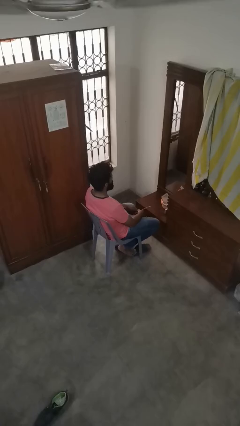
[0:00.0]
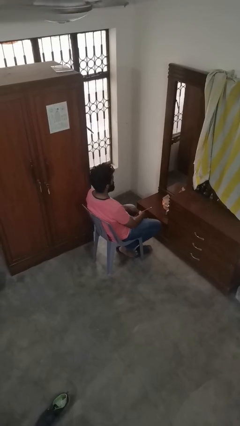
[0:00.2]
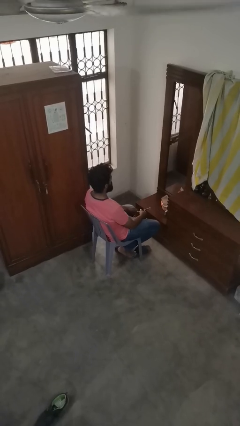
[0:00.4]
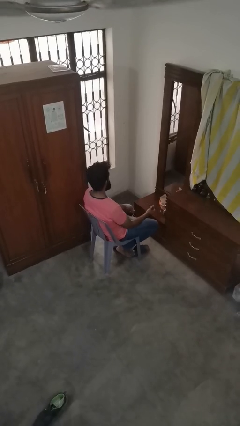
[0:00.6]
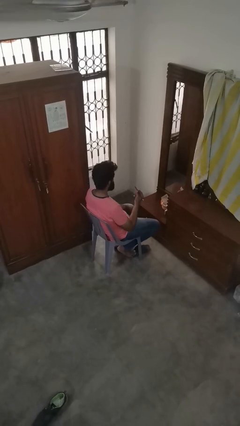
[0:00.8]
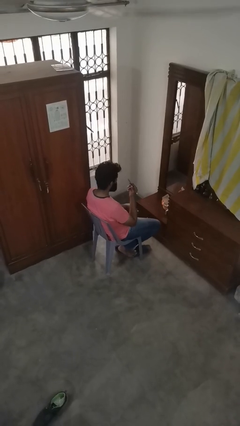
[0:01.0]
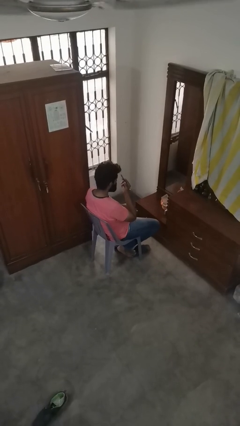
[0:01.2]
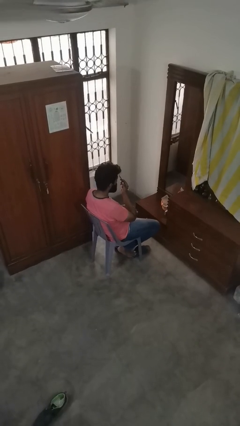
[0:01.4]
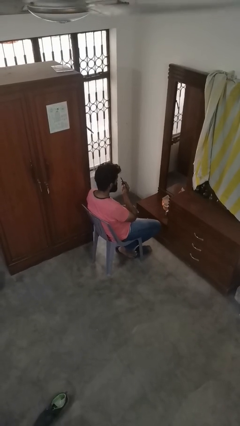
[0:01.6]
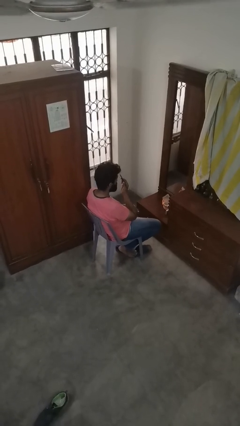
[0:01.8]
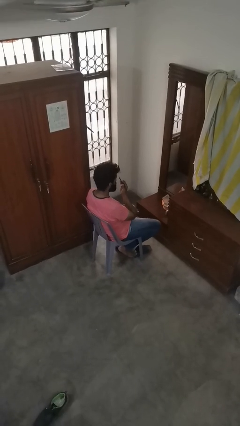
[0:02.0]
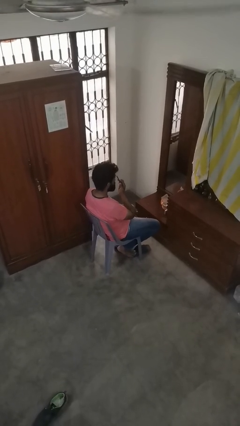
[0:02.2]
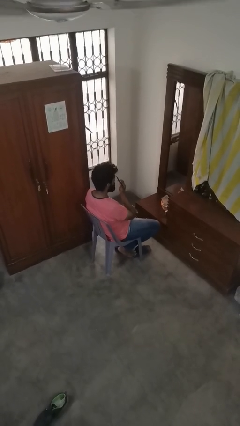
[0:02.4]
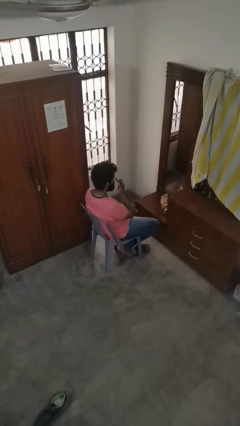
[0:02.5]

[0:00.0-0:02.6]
person applies eye makeup

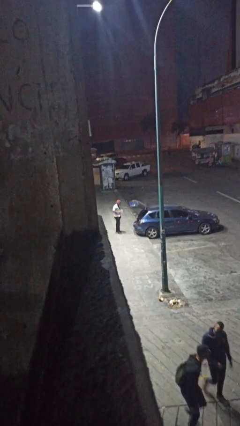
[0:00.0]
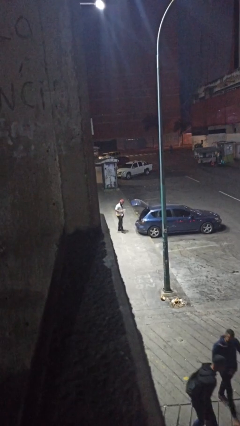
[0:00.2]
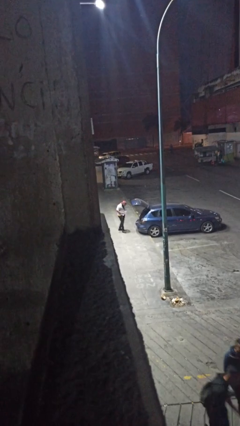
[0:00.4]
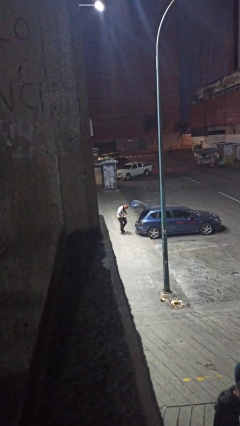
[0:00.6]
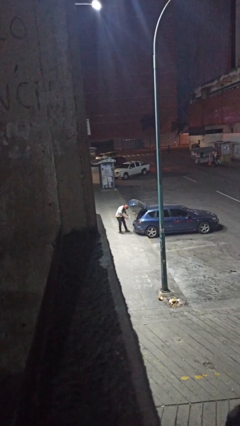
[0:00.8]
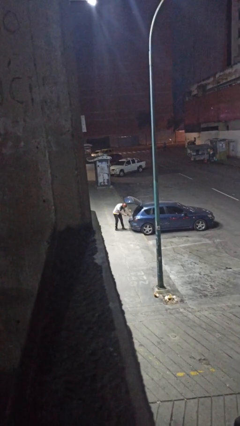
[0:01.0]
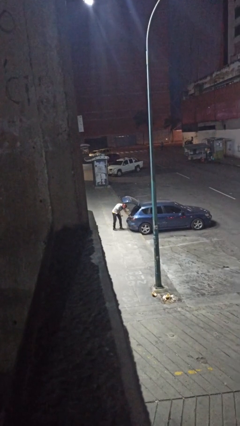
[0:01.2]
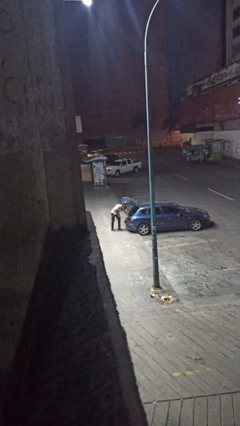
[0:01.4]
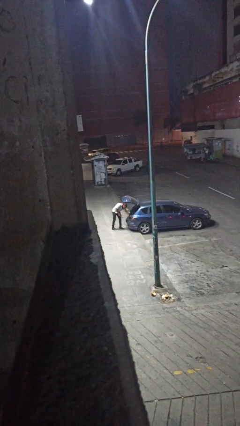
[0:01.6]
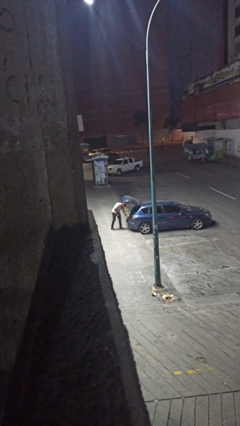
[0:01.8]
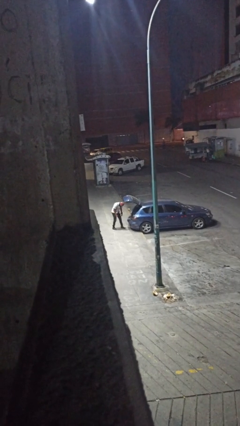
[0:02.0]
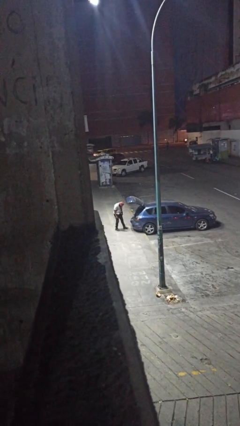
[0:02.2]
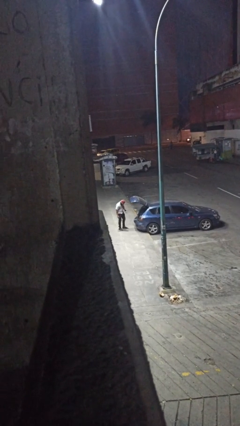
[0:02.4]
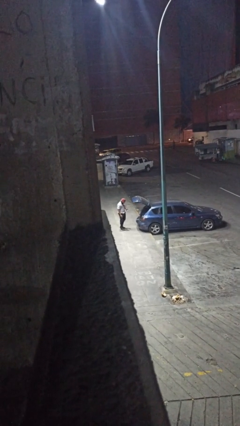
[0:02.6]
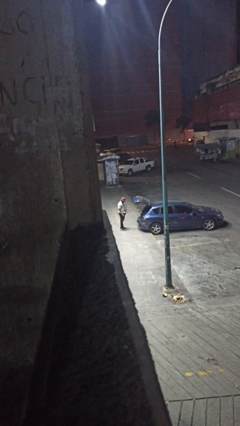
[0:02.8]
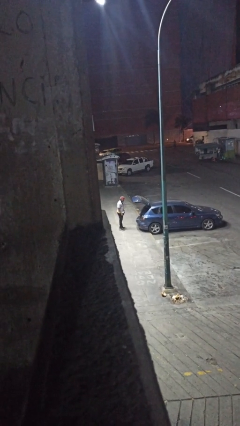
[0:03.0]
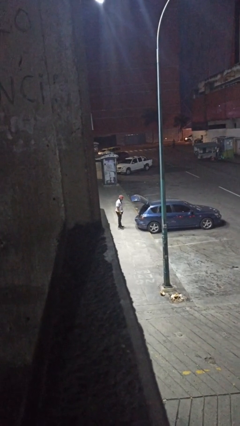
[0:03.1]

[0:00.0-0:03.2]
person loads car

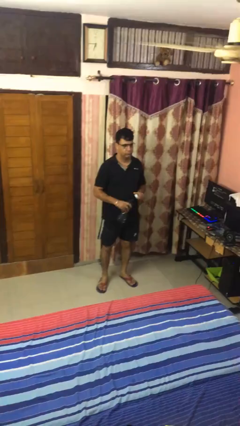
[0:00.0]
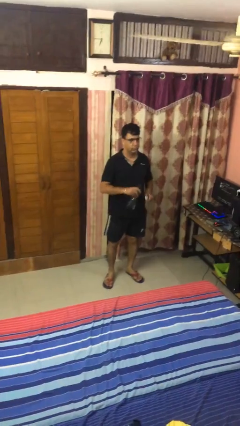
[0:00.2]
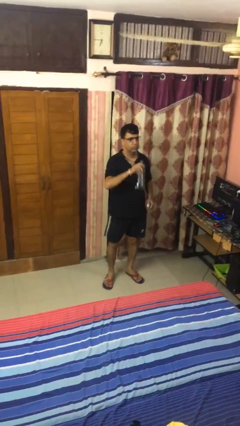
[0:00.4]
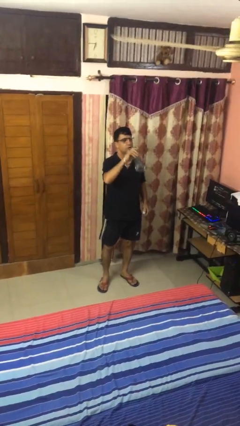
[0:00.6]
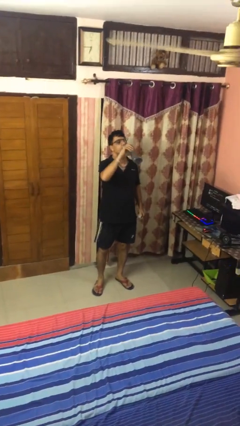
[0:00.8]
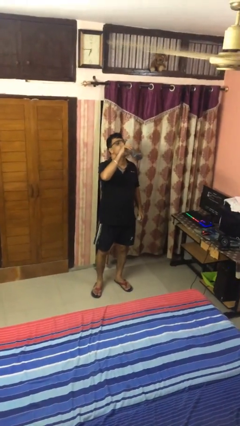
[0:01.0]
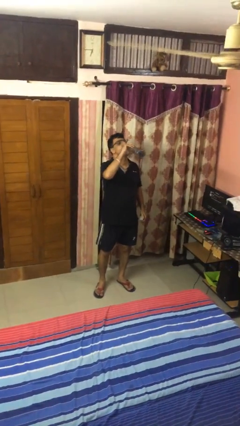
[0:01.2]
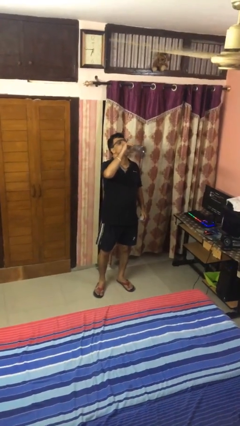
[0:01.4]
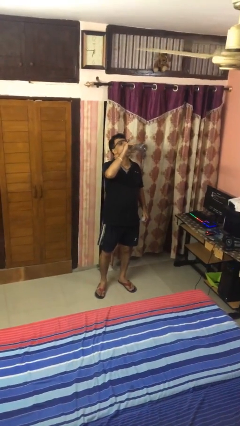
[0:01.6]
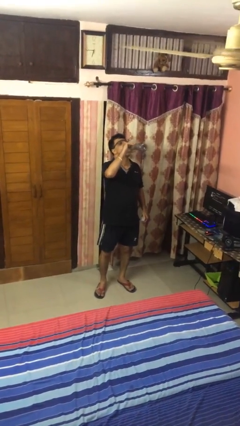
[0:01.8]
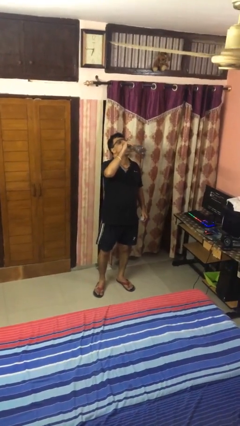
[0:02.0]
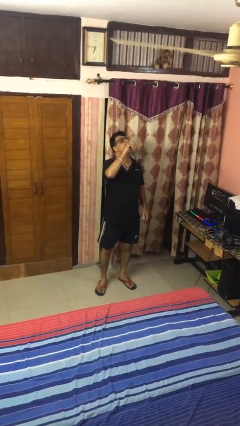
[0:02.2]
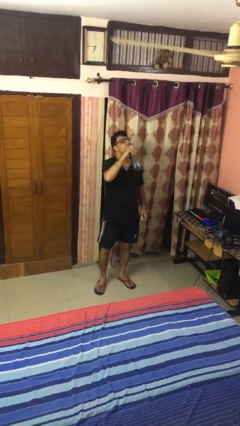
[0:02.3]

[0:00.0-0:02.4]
person drinks from bottle

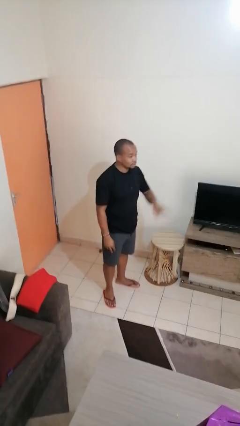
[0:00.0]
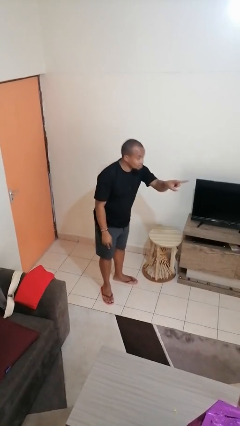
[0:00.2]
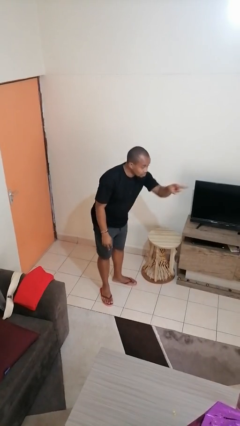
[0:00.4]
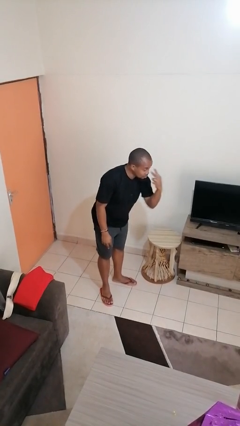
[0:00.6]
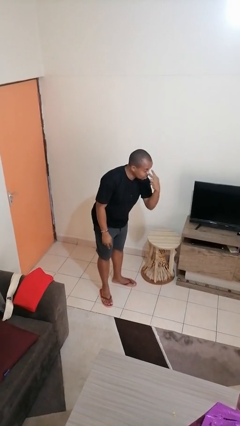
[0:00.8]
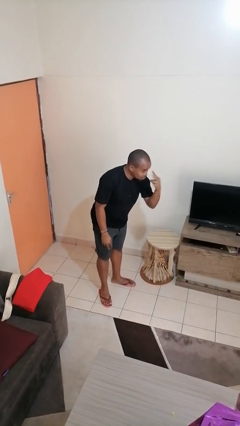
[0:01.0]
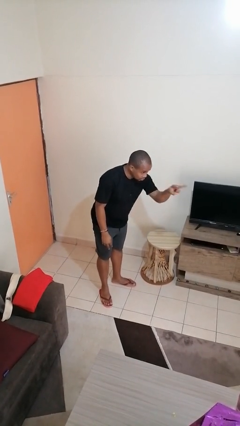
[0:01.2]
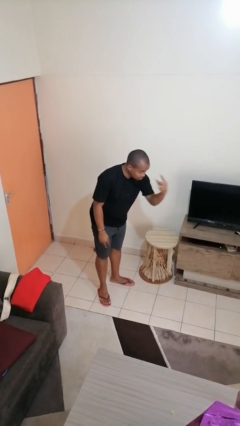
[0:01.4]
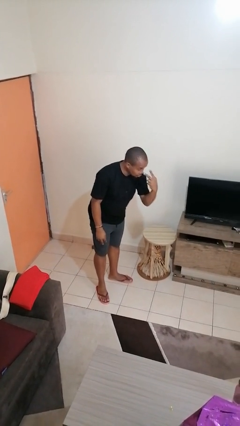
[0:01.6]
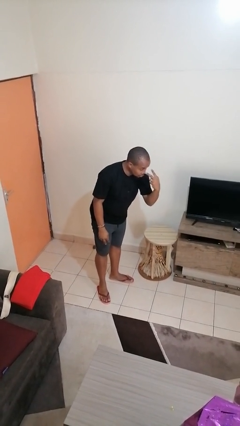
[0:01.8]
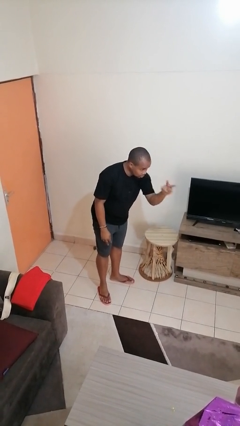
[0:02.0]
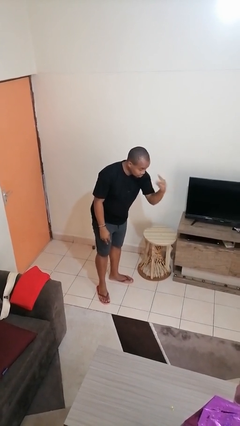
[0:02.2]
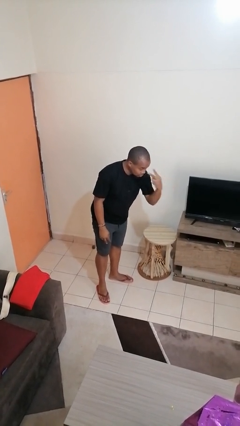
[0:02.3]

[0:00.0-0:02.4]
person gestures watch closely

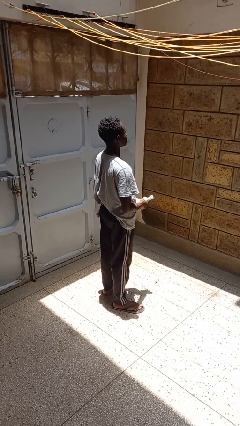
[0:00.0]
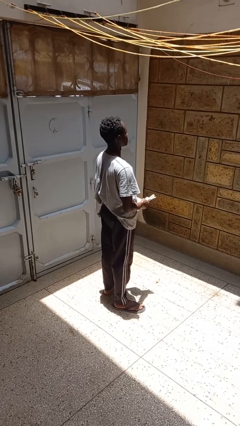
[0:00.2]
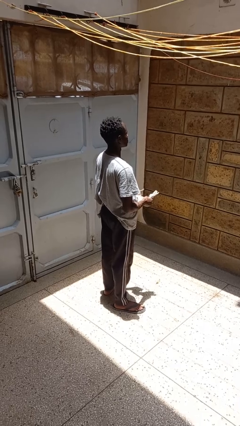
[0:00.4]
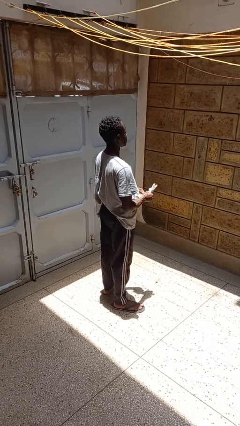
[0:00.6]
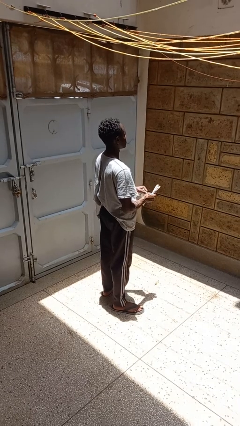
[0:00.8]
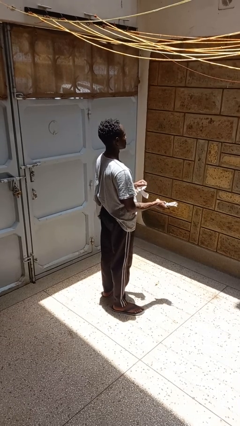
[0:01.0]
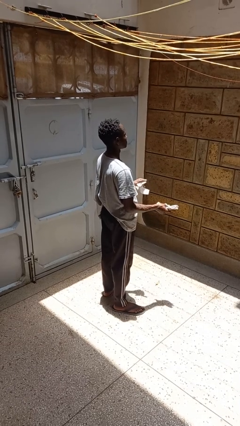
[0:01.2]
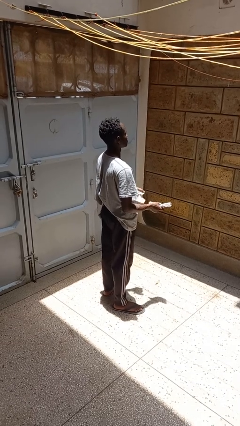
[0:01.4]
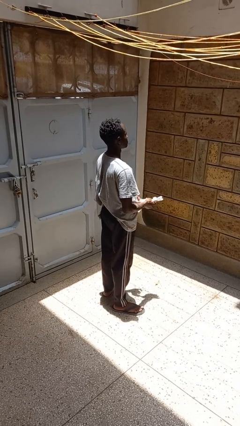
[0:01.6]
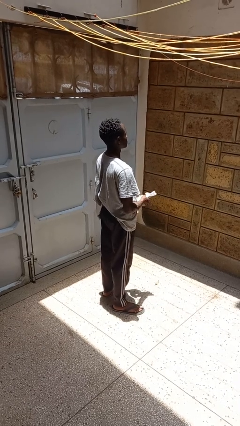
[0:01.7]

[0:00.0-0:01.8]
person tears paper

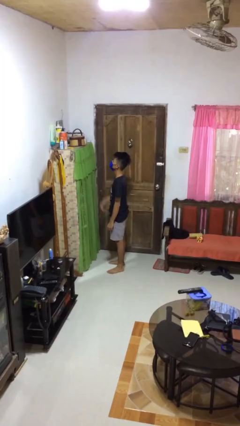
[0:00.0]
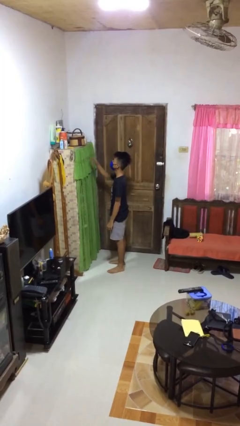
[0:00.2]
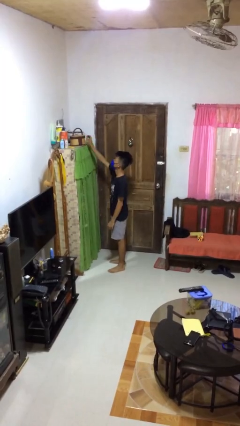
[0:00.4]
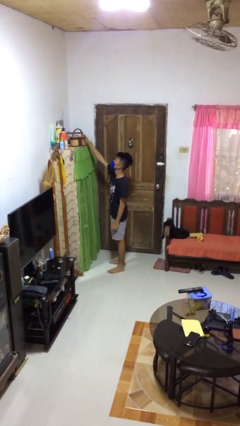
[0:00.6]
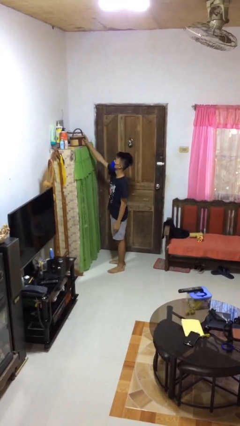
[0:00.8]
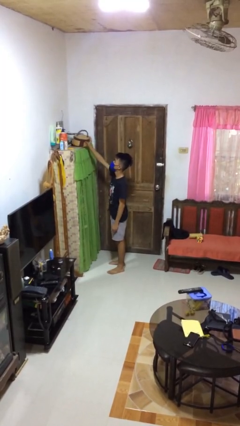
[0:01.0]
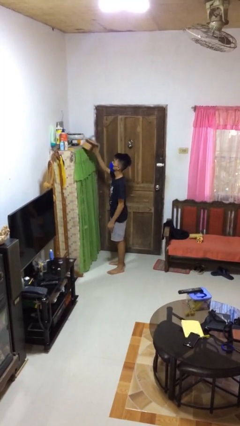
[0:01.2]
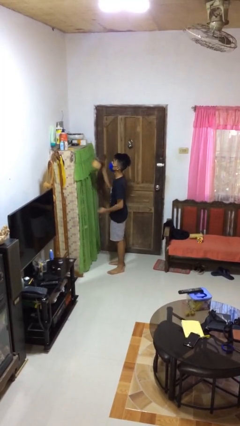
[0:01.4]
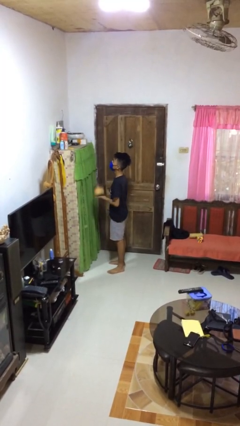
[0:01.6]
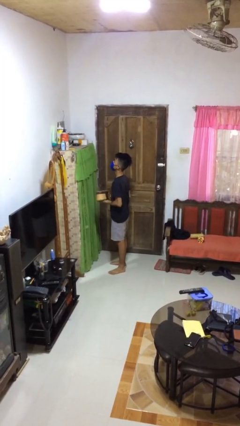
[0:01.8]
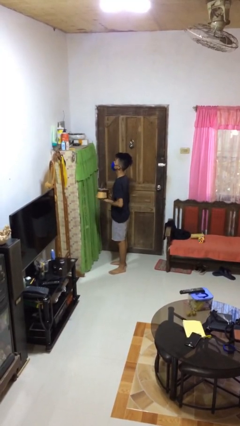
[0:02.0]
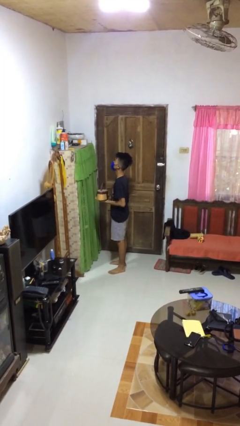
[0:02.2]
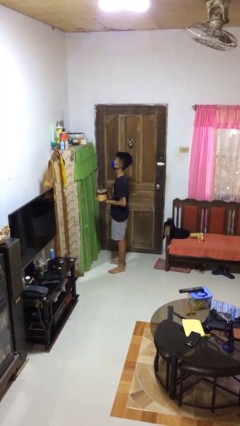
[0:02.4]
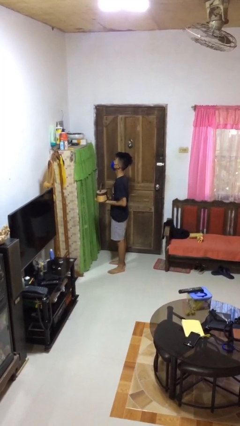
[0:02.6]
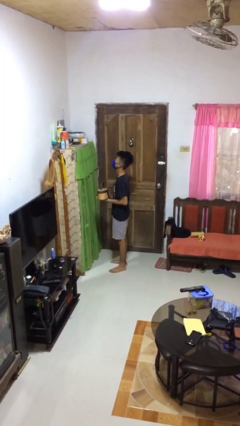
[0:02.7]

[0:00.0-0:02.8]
person picks up object from shelf

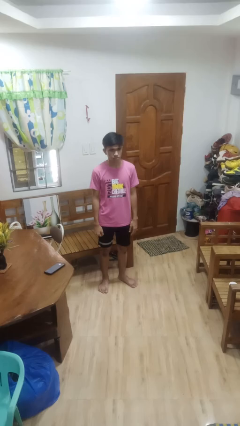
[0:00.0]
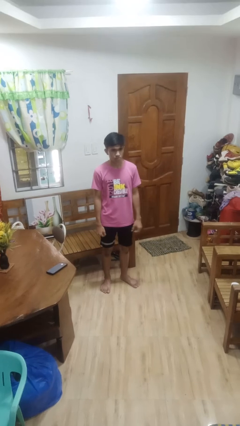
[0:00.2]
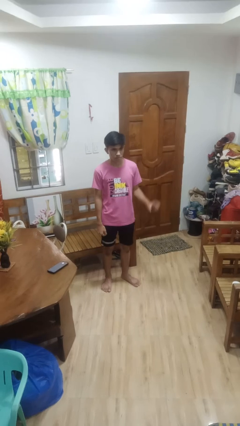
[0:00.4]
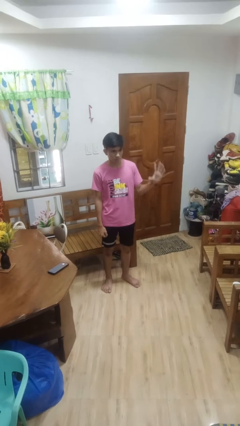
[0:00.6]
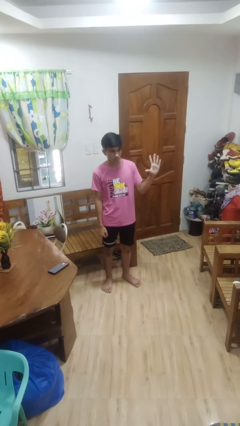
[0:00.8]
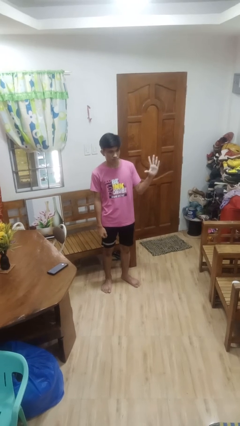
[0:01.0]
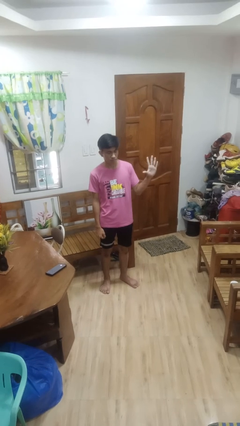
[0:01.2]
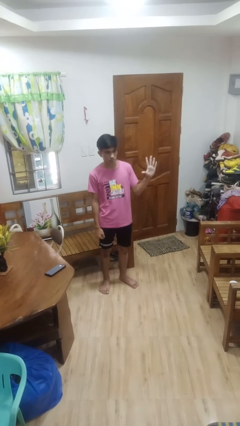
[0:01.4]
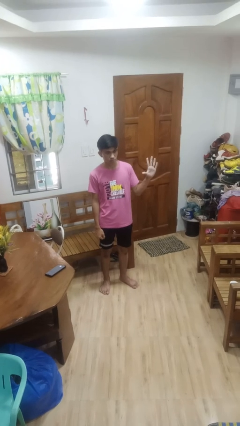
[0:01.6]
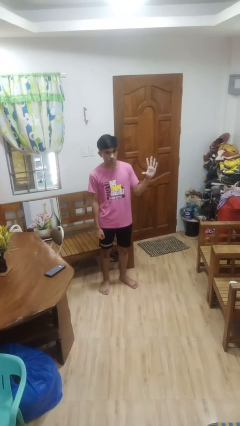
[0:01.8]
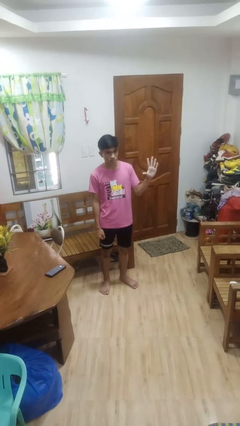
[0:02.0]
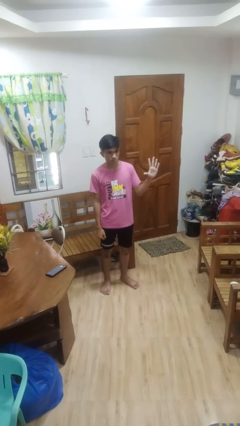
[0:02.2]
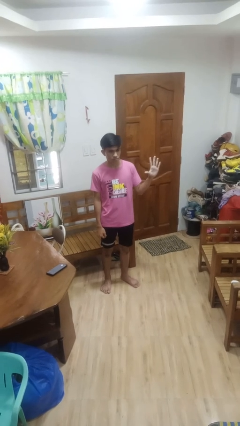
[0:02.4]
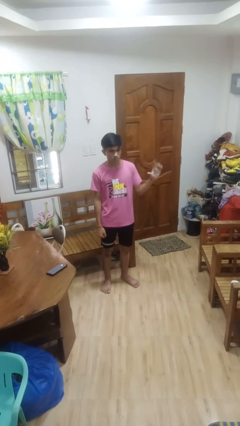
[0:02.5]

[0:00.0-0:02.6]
person gestures number five
